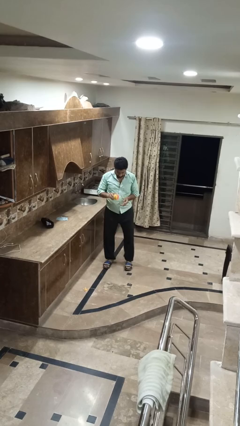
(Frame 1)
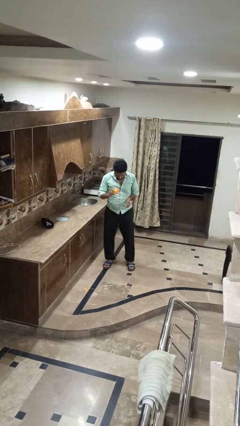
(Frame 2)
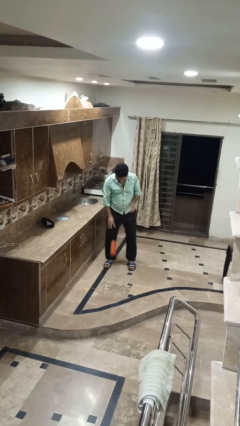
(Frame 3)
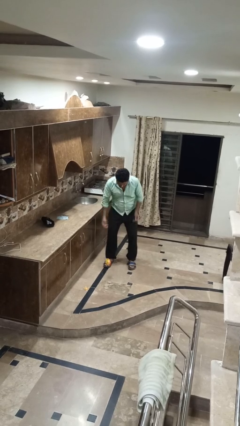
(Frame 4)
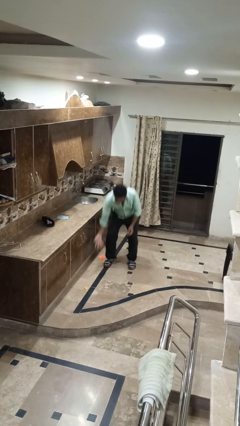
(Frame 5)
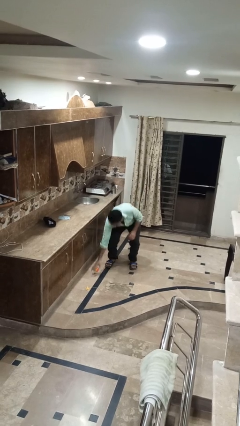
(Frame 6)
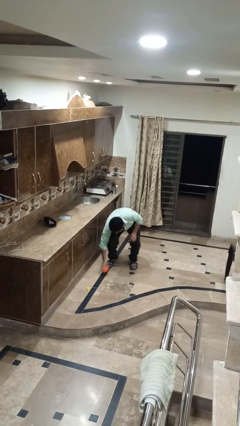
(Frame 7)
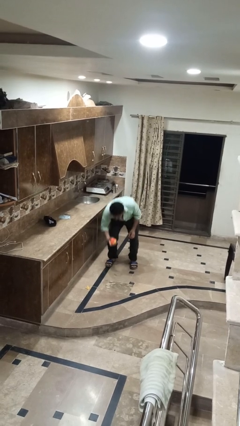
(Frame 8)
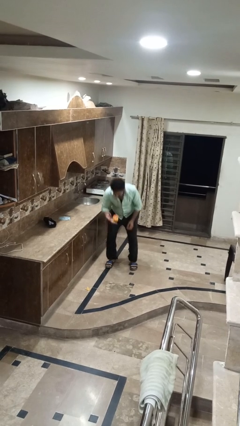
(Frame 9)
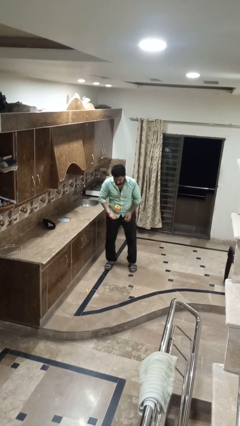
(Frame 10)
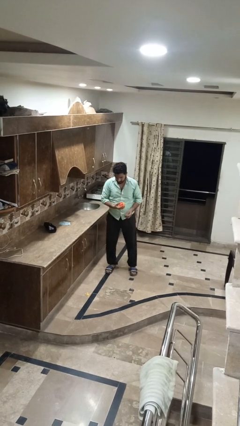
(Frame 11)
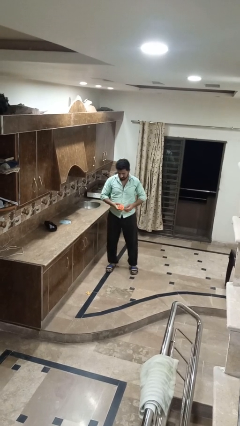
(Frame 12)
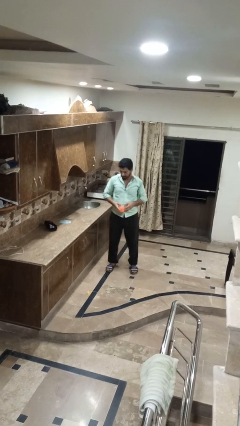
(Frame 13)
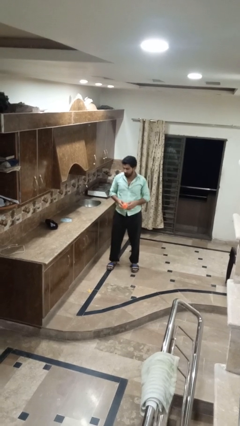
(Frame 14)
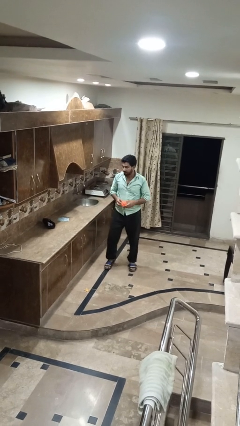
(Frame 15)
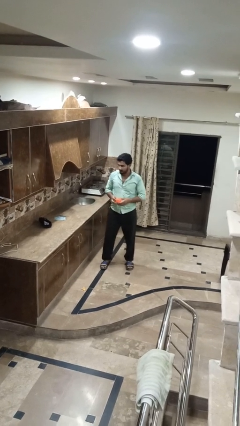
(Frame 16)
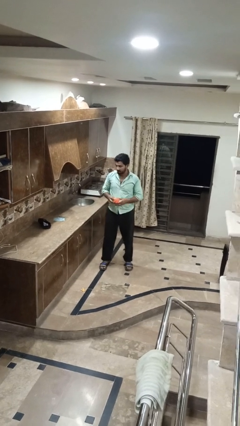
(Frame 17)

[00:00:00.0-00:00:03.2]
person bounces ball on floor

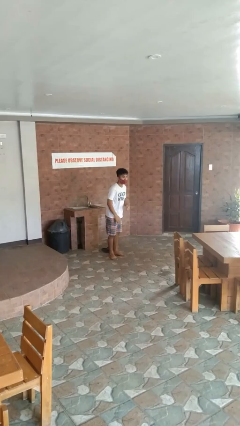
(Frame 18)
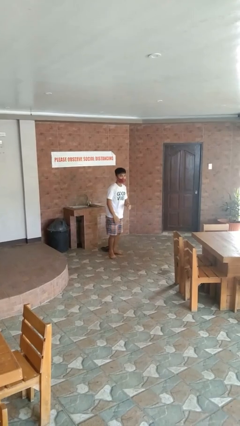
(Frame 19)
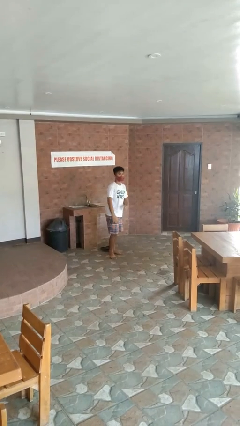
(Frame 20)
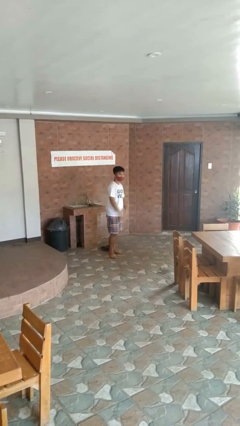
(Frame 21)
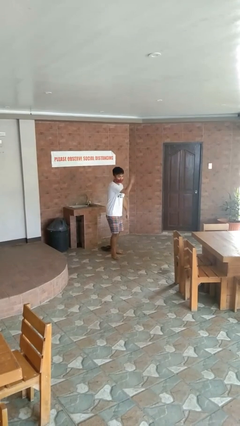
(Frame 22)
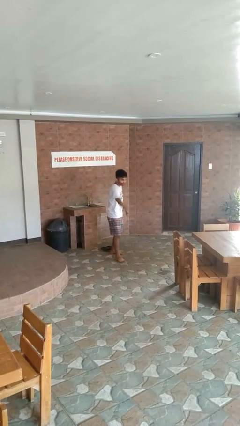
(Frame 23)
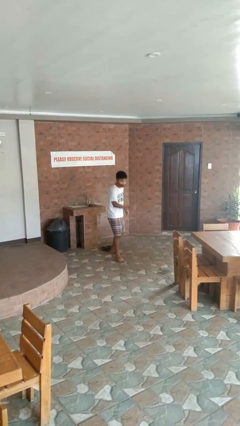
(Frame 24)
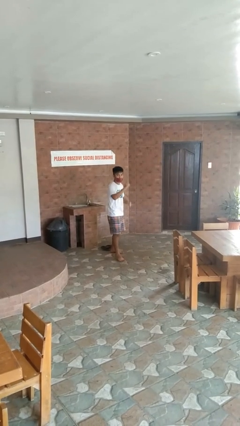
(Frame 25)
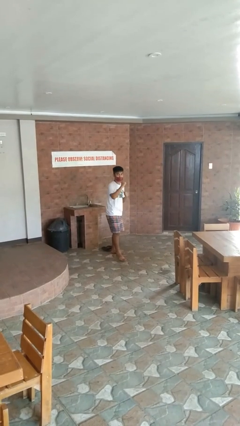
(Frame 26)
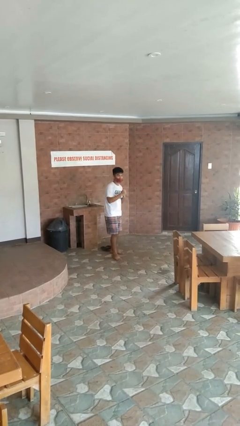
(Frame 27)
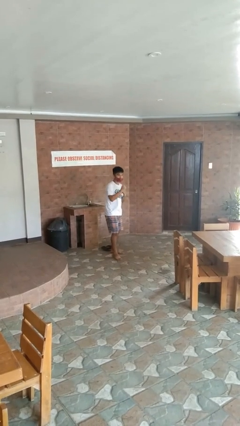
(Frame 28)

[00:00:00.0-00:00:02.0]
person karate chop

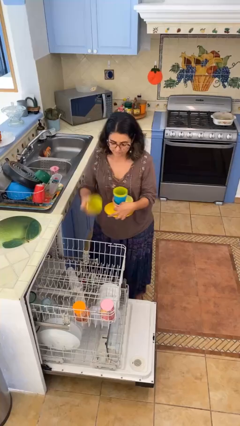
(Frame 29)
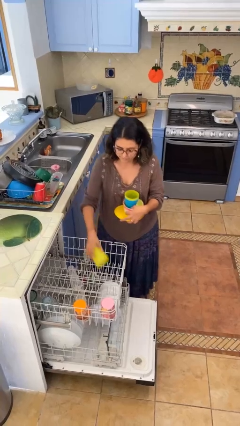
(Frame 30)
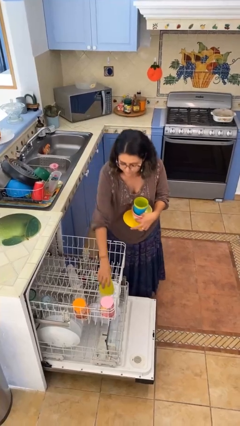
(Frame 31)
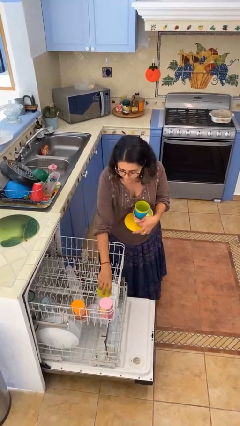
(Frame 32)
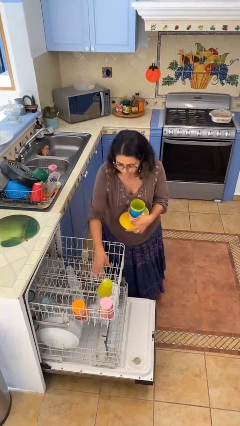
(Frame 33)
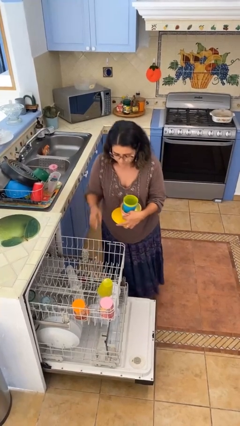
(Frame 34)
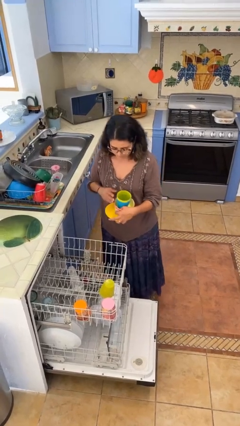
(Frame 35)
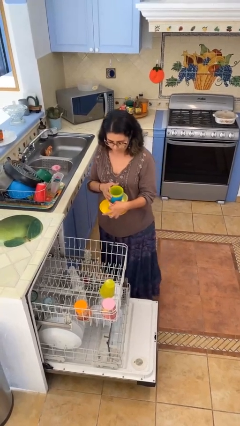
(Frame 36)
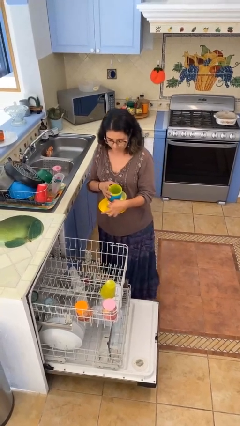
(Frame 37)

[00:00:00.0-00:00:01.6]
person loads dishwasher

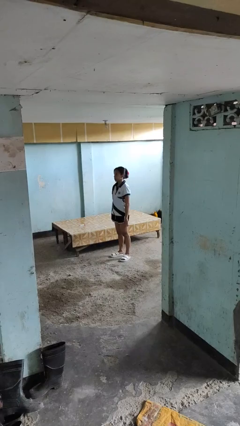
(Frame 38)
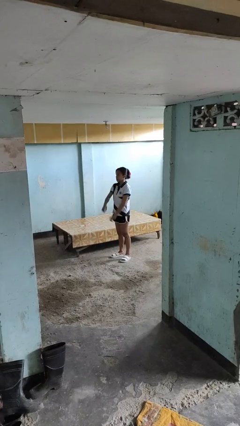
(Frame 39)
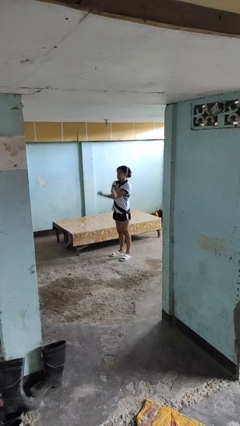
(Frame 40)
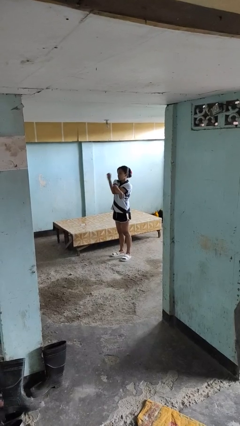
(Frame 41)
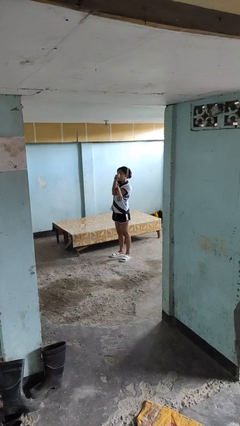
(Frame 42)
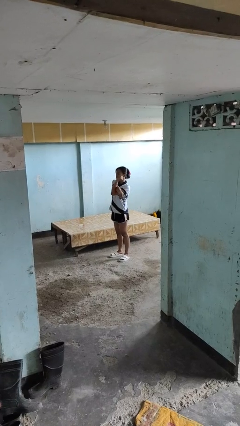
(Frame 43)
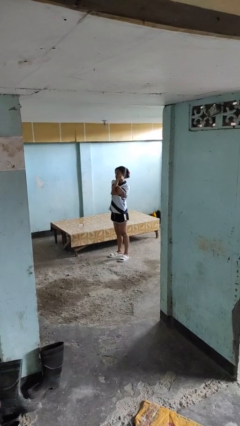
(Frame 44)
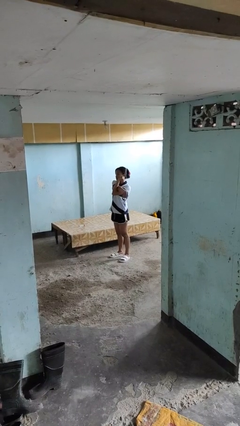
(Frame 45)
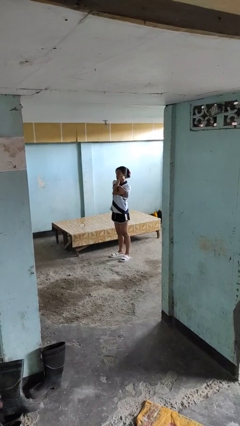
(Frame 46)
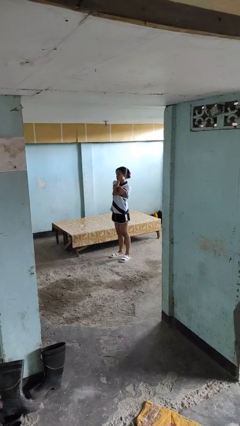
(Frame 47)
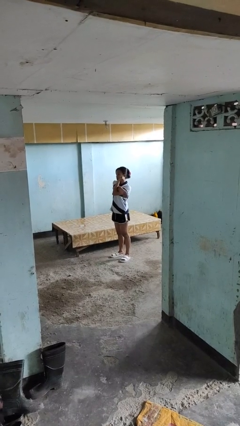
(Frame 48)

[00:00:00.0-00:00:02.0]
person crosses arms

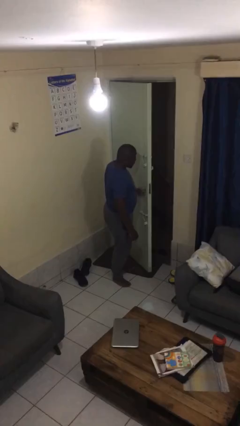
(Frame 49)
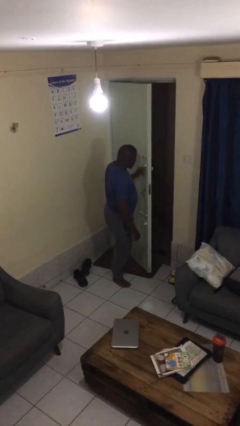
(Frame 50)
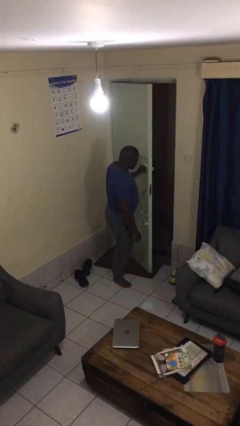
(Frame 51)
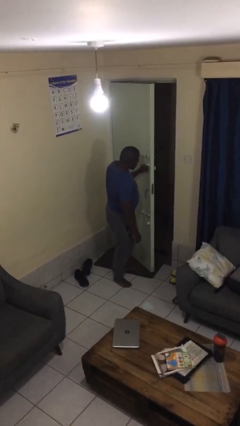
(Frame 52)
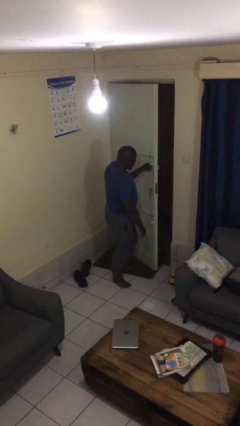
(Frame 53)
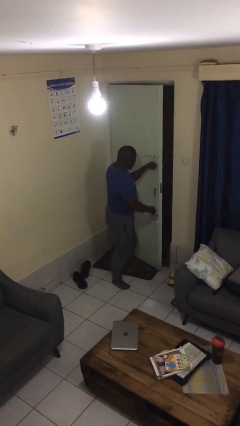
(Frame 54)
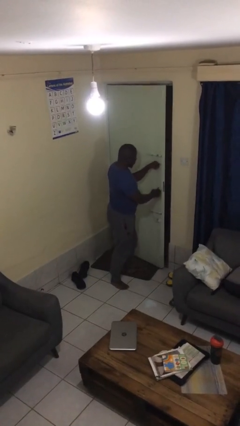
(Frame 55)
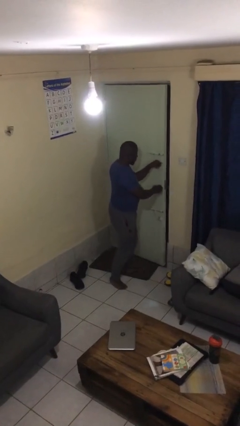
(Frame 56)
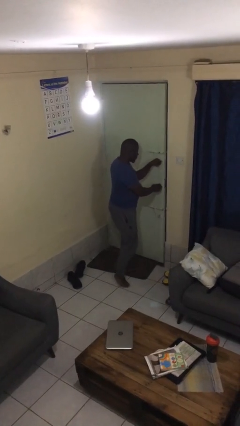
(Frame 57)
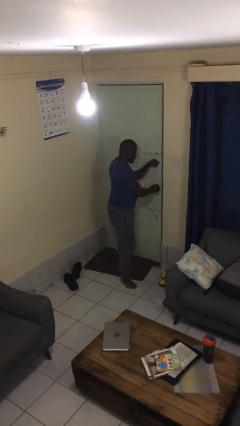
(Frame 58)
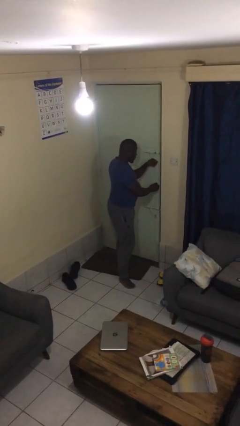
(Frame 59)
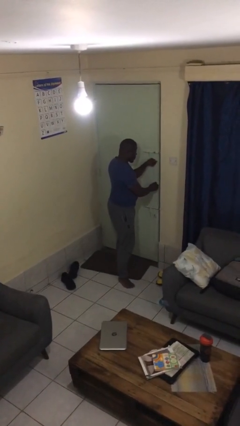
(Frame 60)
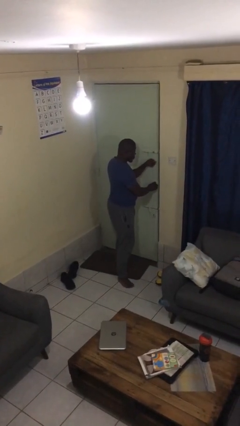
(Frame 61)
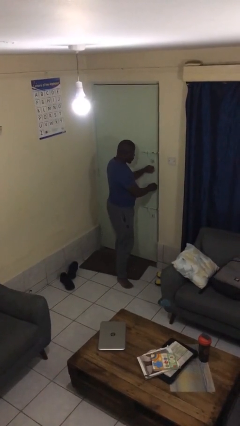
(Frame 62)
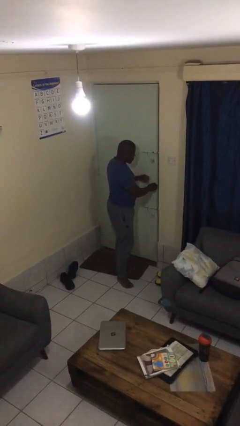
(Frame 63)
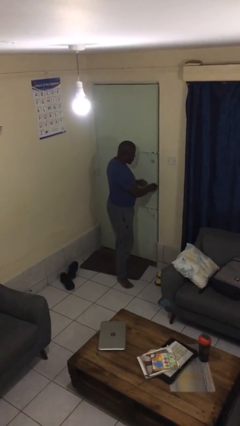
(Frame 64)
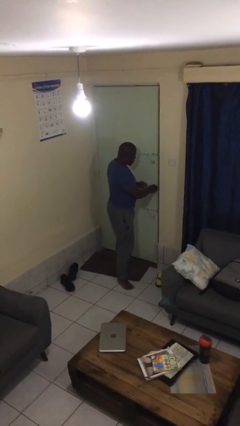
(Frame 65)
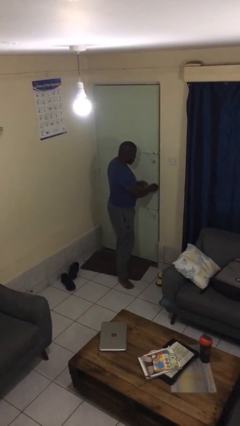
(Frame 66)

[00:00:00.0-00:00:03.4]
person closes facility door

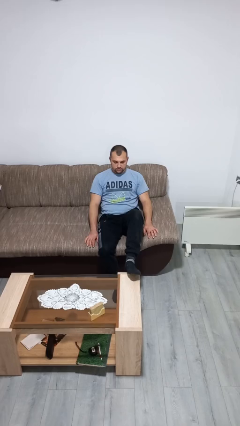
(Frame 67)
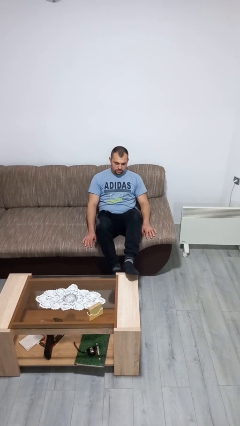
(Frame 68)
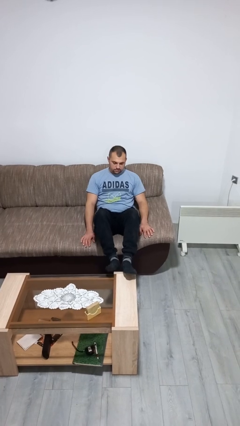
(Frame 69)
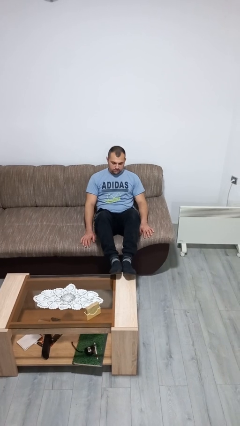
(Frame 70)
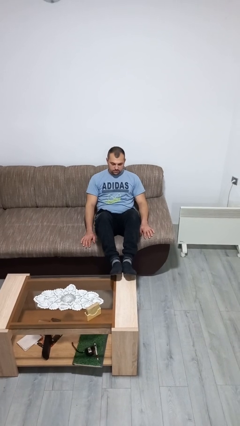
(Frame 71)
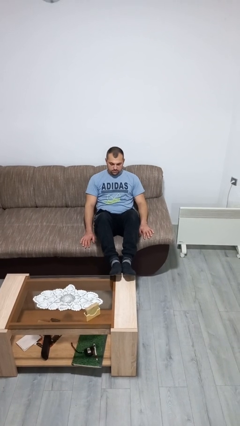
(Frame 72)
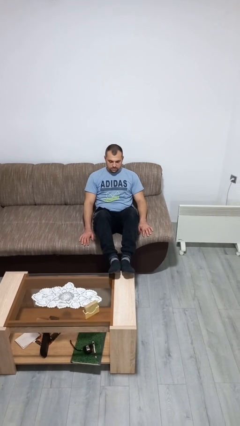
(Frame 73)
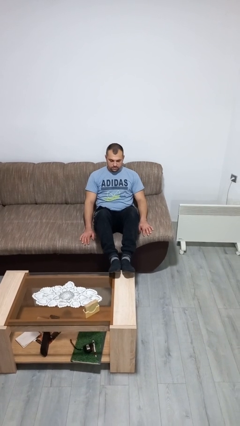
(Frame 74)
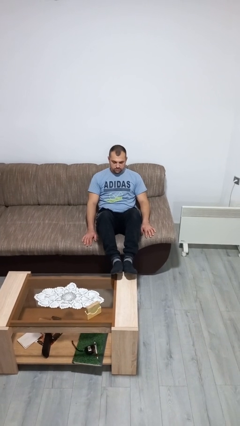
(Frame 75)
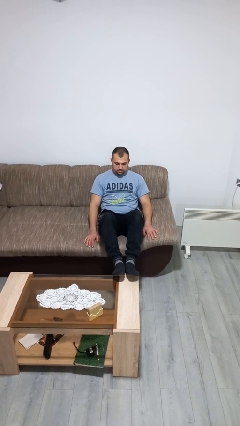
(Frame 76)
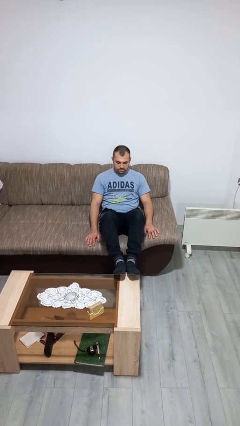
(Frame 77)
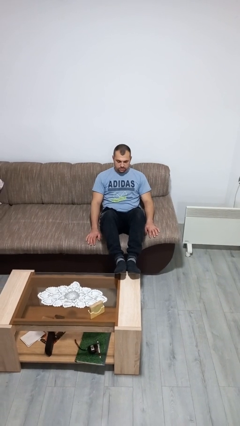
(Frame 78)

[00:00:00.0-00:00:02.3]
person puts feet up

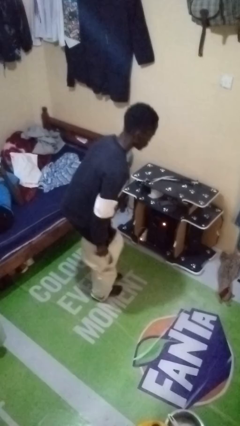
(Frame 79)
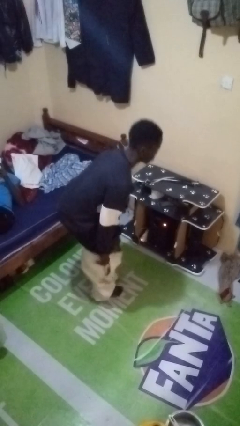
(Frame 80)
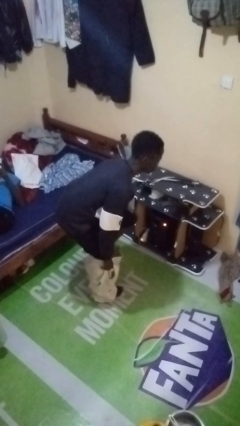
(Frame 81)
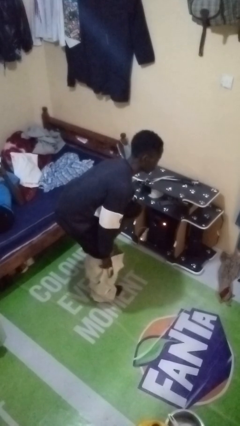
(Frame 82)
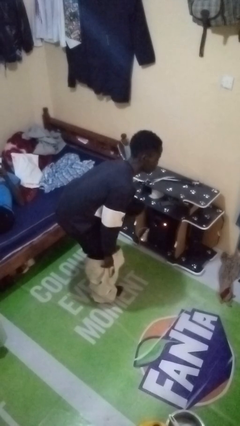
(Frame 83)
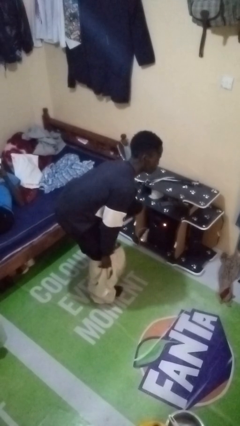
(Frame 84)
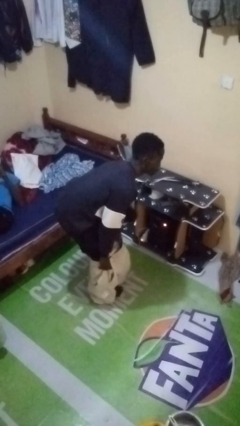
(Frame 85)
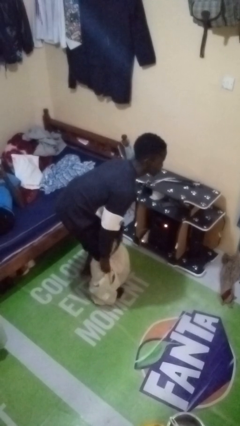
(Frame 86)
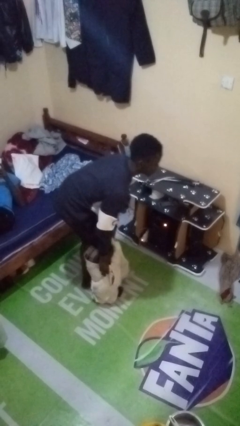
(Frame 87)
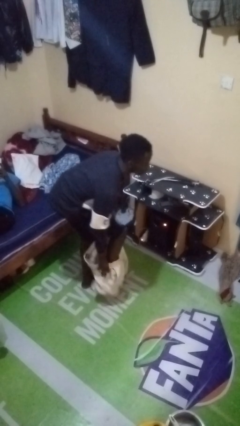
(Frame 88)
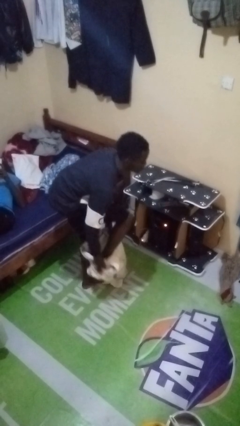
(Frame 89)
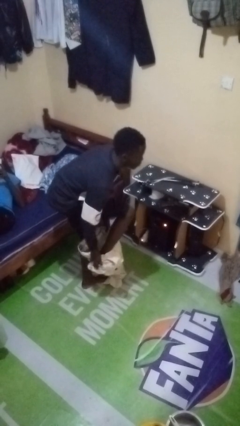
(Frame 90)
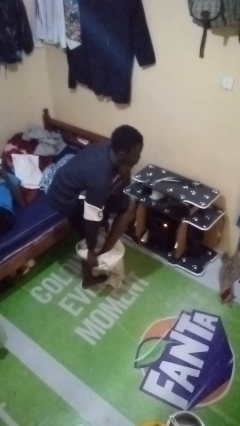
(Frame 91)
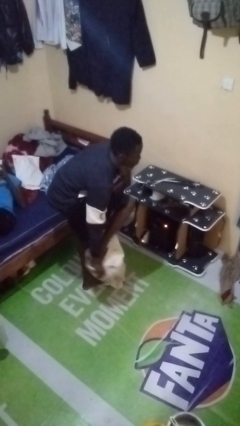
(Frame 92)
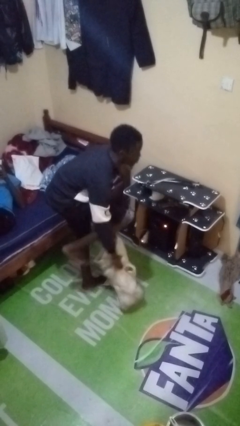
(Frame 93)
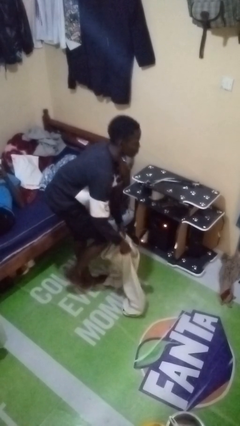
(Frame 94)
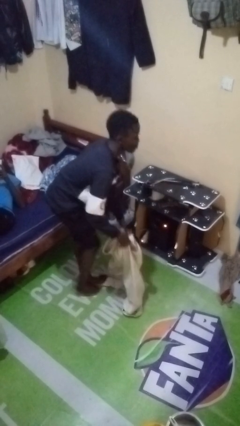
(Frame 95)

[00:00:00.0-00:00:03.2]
person takes off pants
